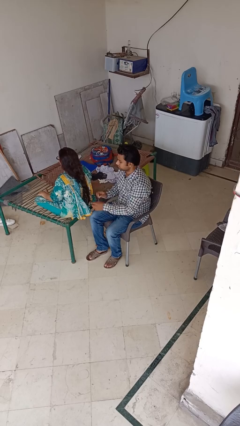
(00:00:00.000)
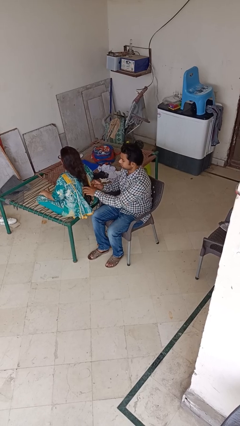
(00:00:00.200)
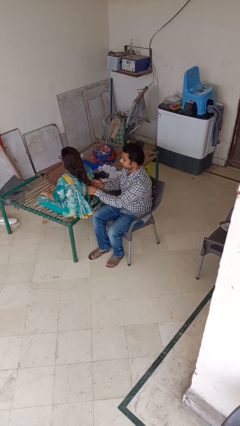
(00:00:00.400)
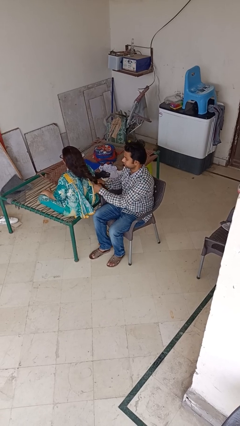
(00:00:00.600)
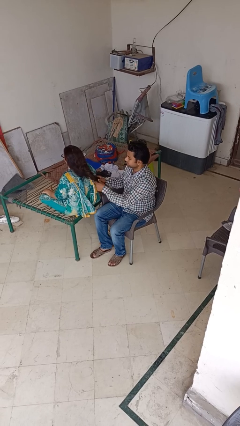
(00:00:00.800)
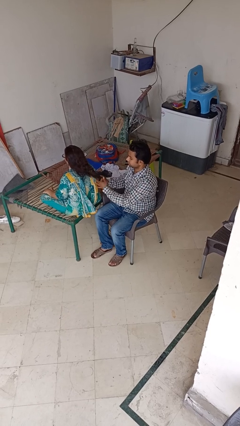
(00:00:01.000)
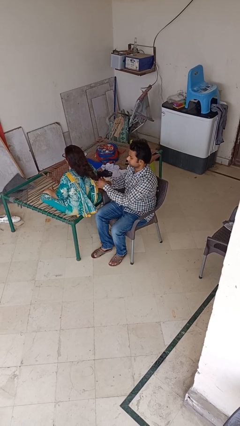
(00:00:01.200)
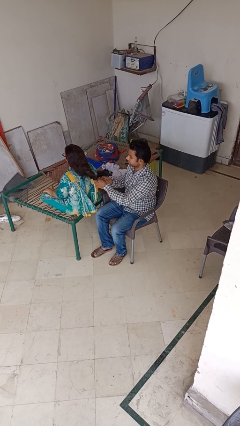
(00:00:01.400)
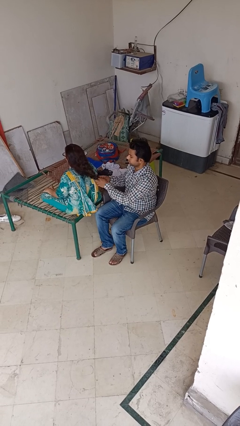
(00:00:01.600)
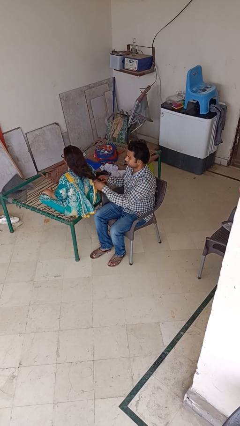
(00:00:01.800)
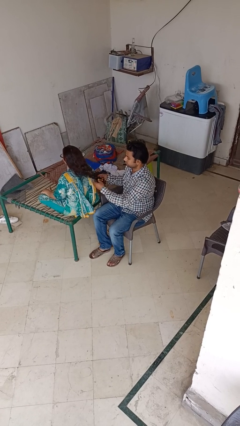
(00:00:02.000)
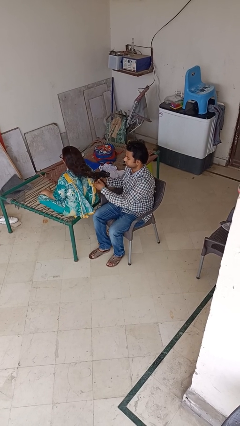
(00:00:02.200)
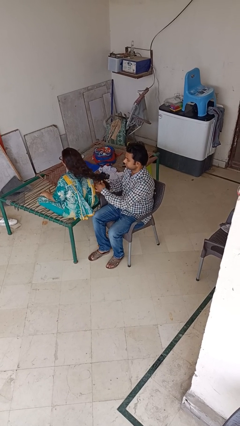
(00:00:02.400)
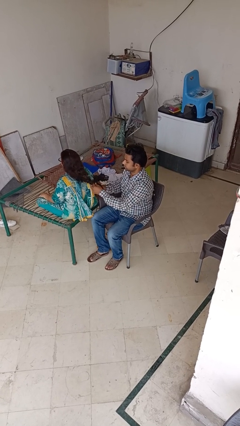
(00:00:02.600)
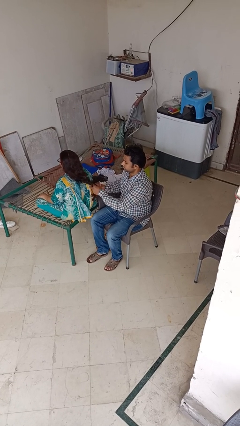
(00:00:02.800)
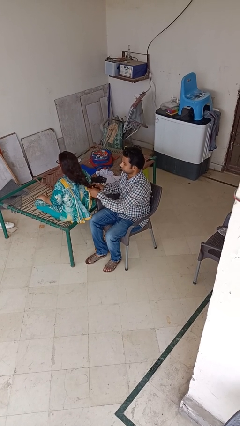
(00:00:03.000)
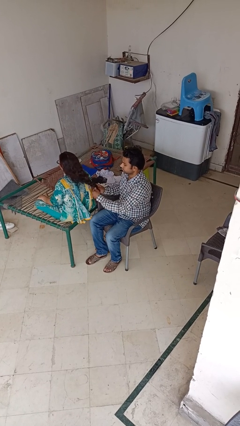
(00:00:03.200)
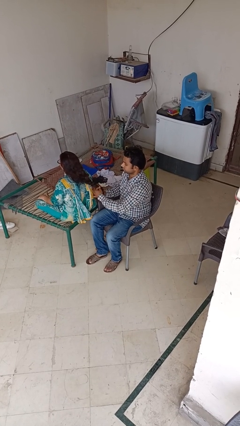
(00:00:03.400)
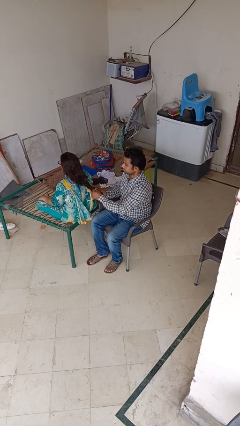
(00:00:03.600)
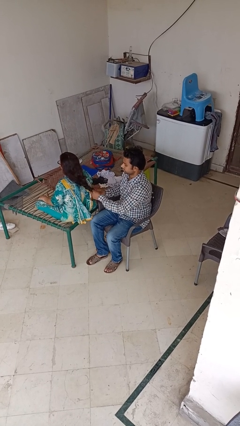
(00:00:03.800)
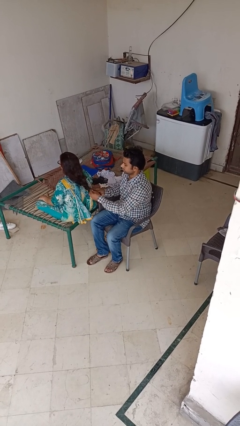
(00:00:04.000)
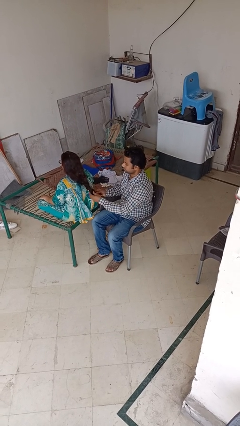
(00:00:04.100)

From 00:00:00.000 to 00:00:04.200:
person braids hair of person

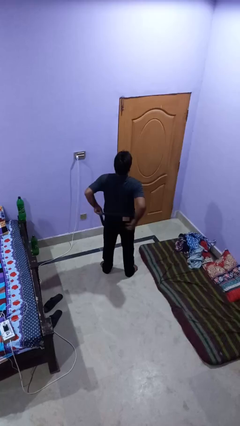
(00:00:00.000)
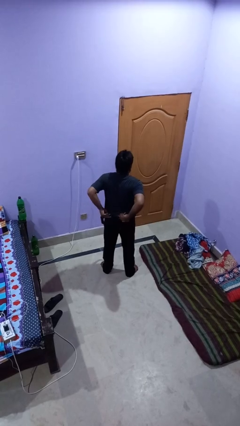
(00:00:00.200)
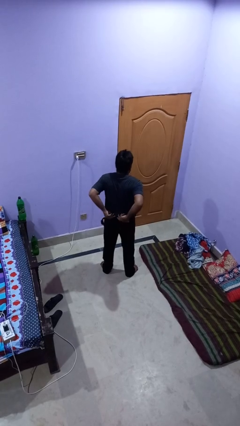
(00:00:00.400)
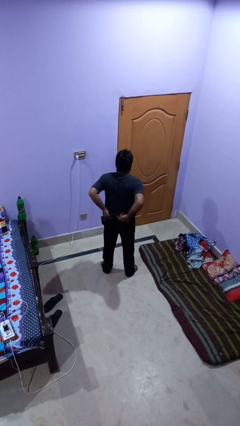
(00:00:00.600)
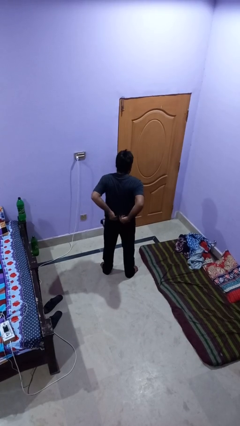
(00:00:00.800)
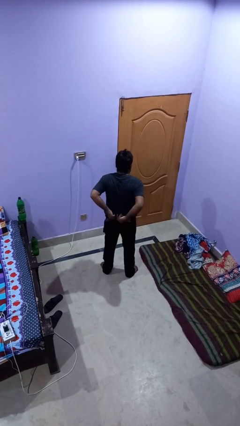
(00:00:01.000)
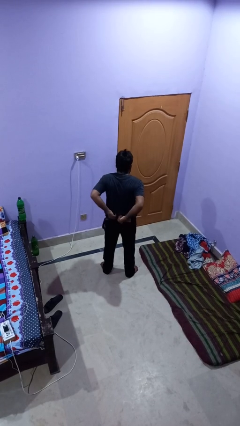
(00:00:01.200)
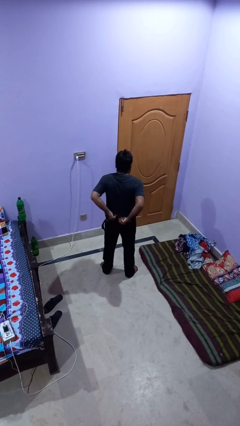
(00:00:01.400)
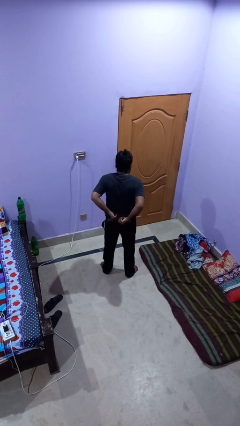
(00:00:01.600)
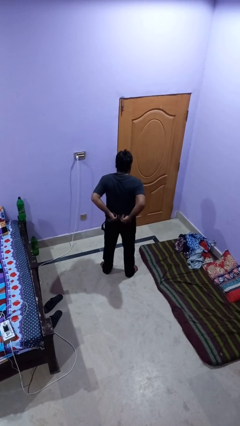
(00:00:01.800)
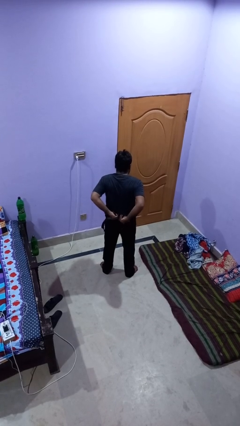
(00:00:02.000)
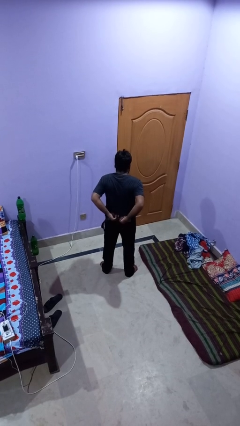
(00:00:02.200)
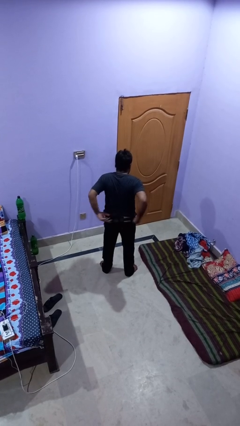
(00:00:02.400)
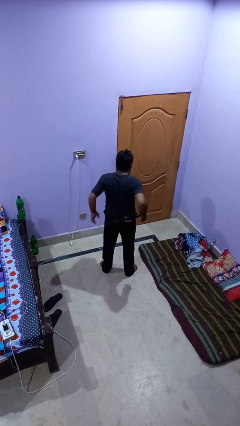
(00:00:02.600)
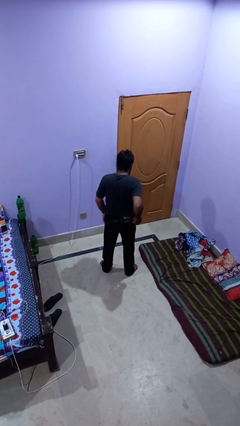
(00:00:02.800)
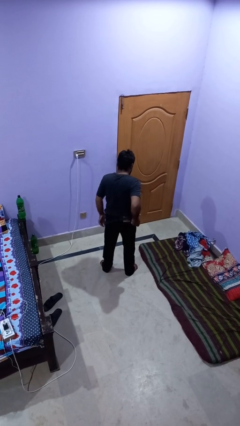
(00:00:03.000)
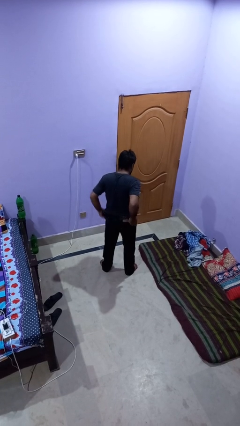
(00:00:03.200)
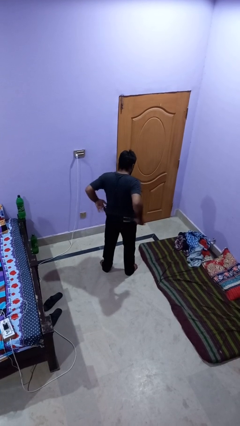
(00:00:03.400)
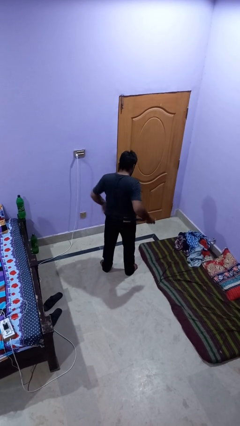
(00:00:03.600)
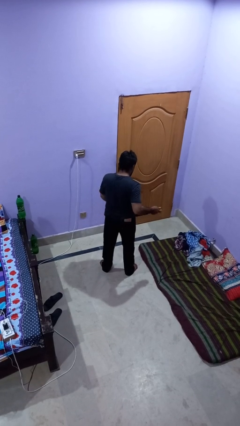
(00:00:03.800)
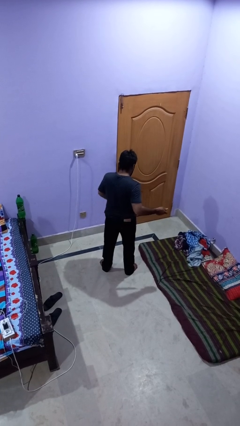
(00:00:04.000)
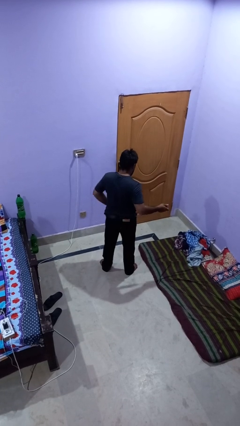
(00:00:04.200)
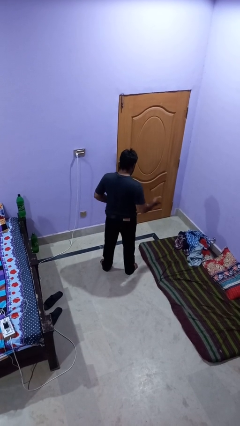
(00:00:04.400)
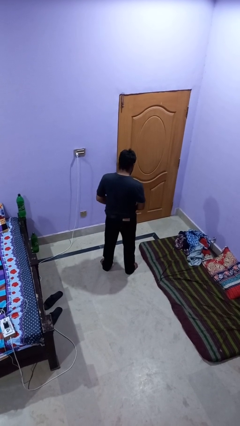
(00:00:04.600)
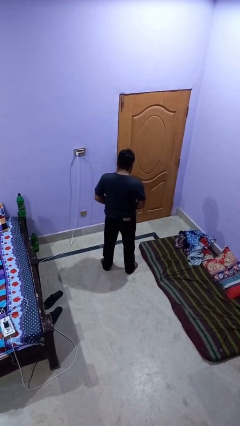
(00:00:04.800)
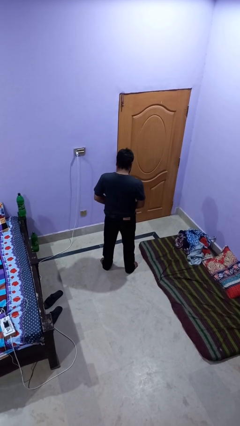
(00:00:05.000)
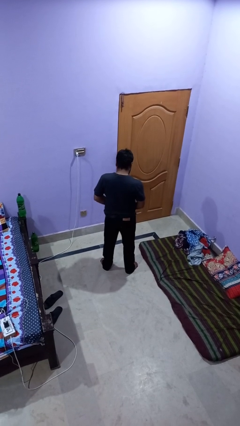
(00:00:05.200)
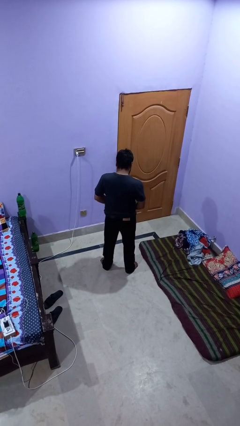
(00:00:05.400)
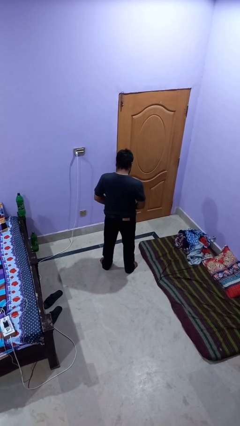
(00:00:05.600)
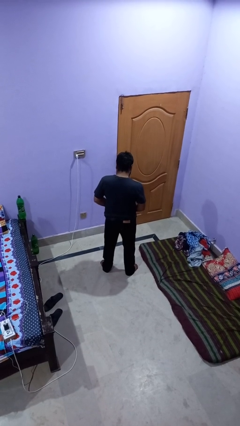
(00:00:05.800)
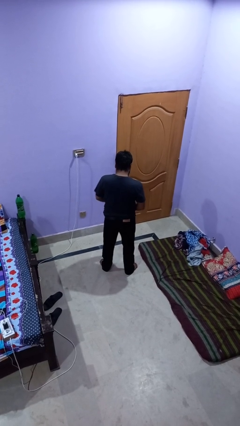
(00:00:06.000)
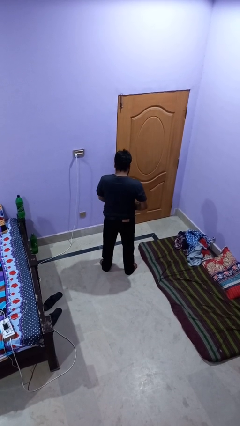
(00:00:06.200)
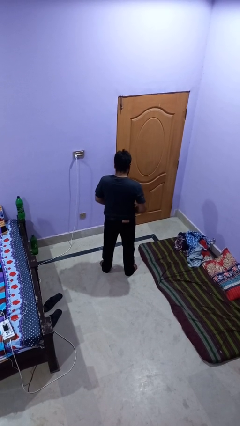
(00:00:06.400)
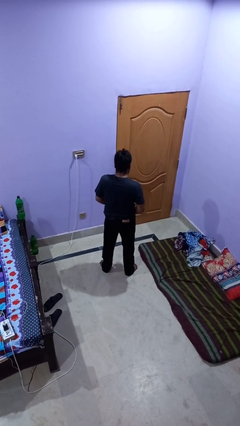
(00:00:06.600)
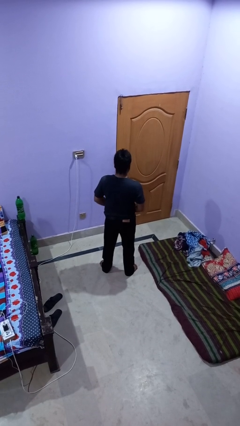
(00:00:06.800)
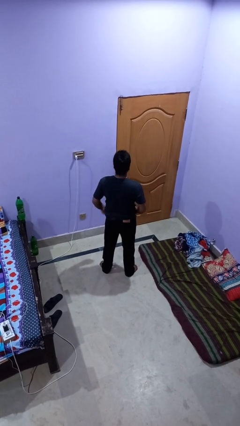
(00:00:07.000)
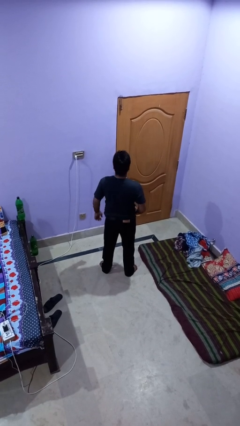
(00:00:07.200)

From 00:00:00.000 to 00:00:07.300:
person puts on belt

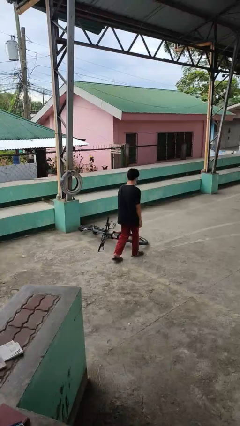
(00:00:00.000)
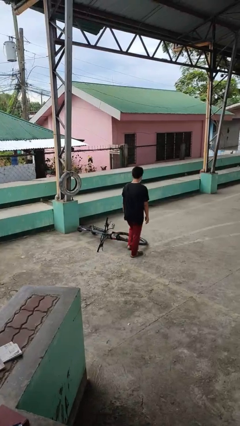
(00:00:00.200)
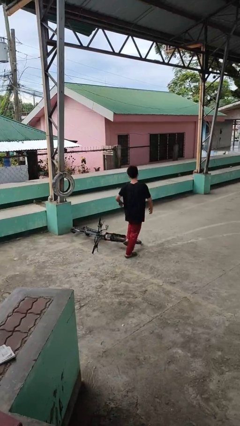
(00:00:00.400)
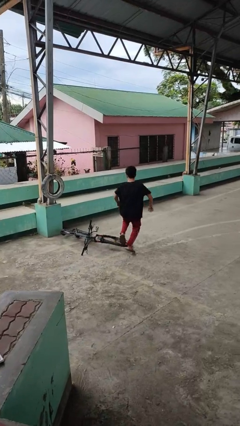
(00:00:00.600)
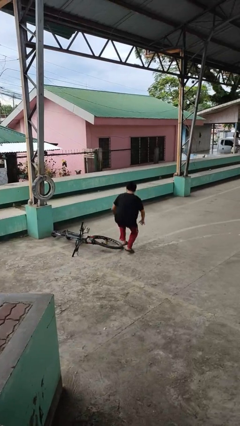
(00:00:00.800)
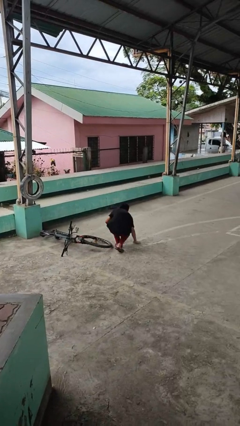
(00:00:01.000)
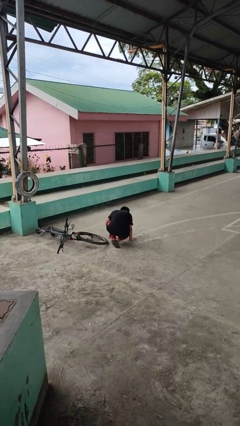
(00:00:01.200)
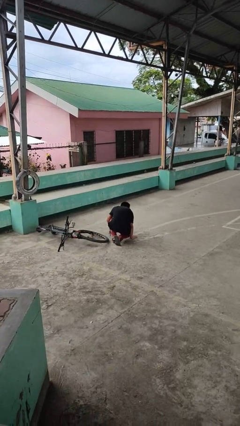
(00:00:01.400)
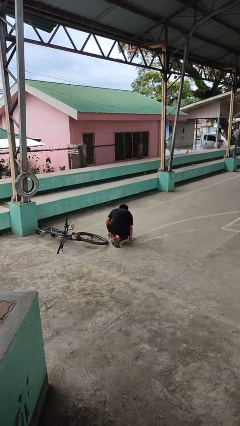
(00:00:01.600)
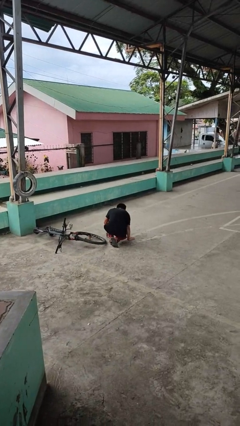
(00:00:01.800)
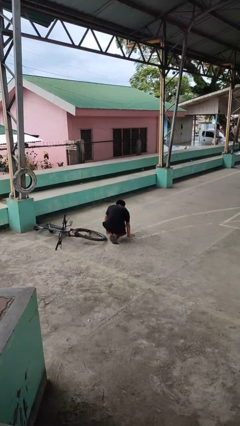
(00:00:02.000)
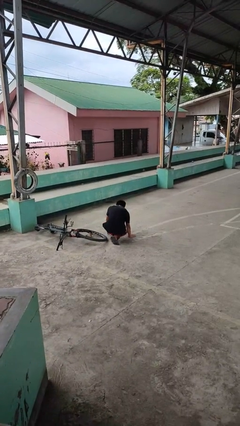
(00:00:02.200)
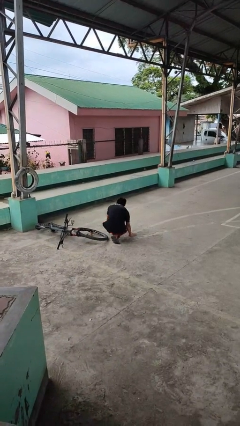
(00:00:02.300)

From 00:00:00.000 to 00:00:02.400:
person drops object

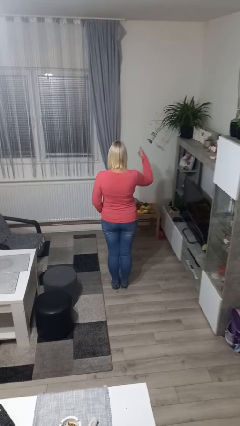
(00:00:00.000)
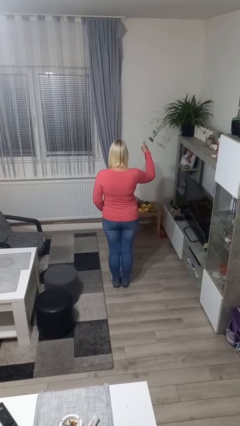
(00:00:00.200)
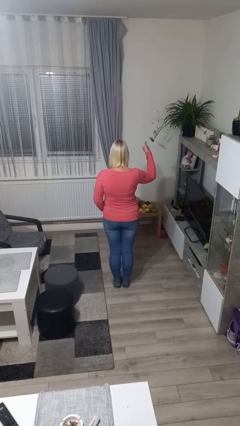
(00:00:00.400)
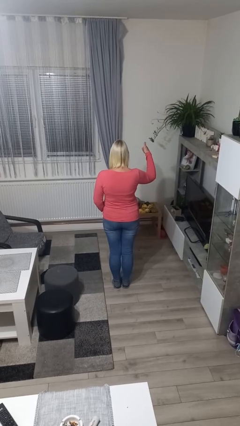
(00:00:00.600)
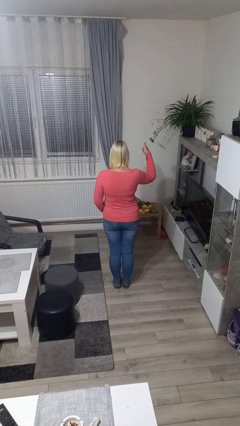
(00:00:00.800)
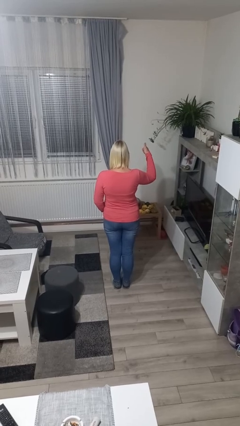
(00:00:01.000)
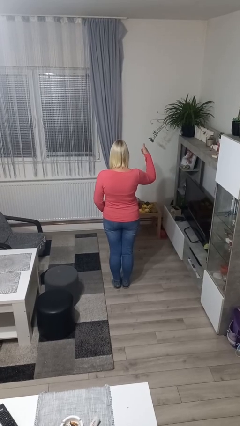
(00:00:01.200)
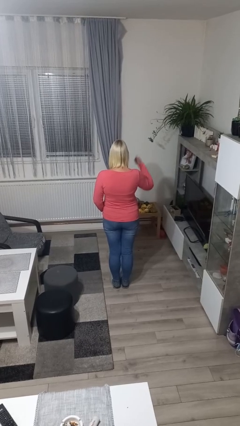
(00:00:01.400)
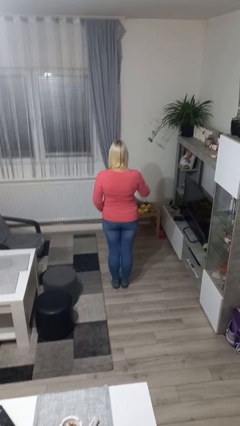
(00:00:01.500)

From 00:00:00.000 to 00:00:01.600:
person gestures number one

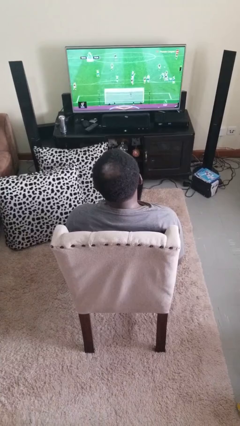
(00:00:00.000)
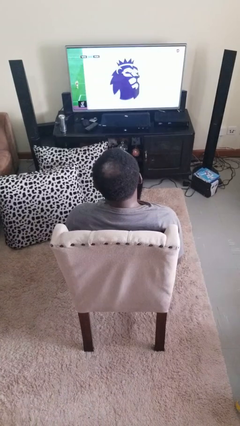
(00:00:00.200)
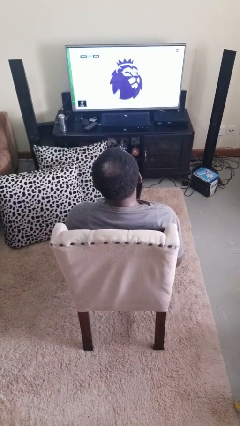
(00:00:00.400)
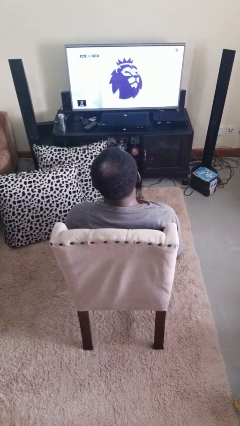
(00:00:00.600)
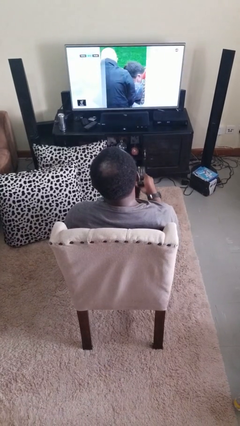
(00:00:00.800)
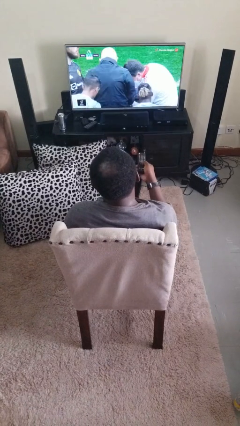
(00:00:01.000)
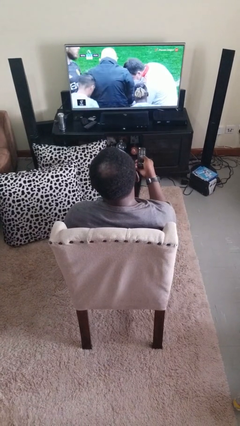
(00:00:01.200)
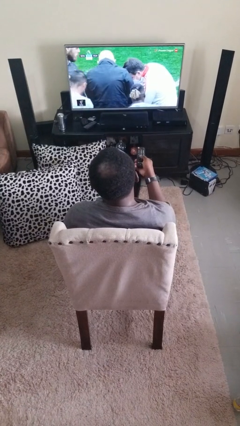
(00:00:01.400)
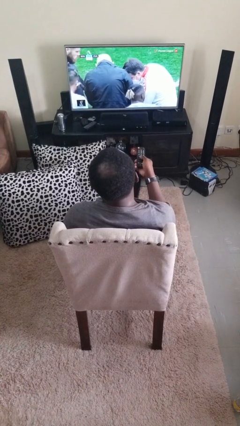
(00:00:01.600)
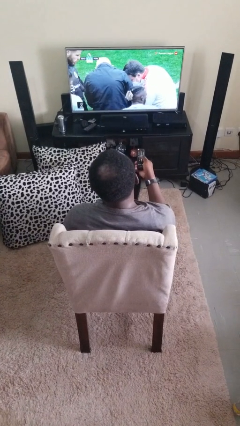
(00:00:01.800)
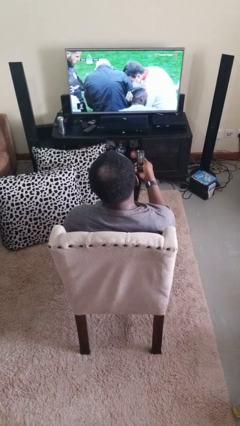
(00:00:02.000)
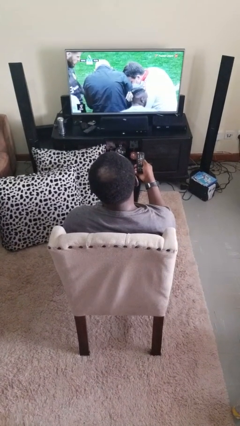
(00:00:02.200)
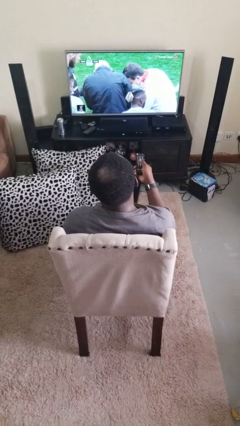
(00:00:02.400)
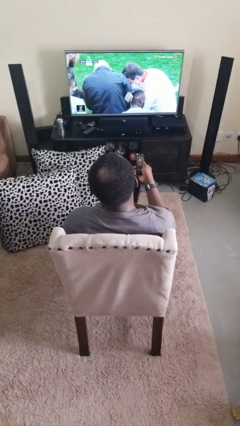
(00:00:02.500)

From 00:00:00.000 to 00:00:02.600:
person uses television remote
